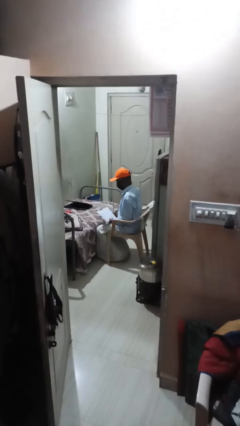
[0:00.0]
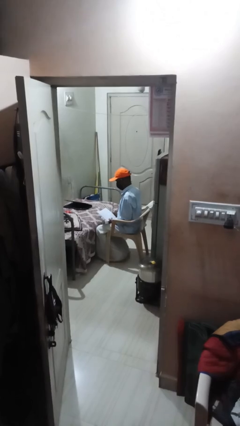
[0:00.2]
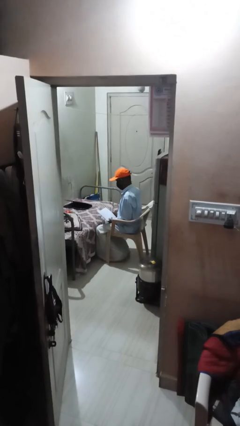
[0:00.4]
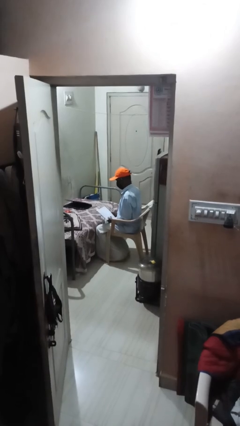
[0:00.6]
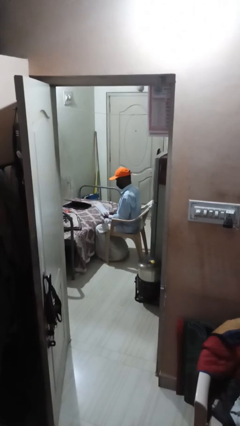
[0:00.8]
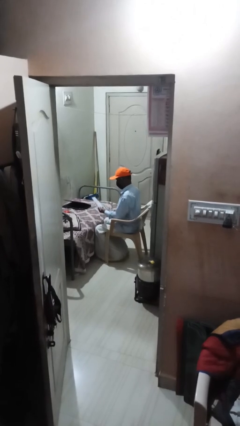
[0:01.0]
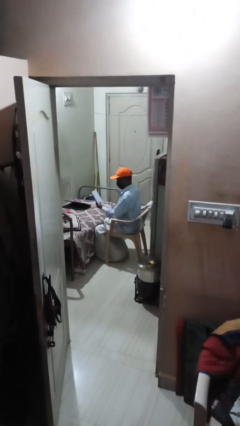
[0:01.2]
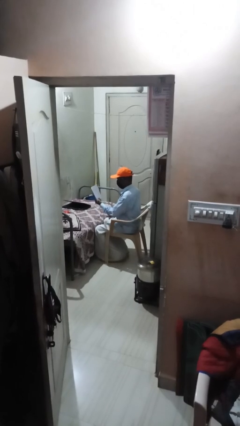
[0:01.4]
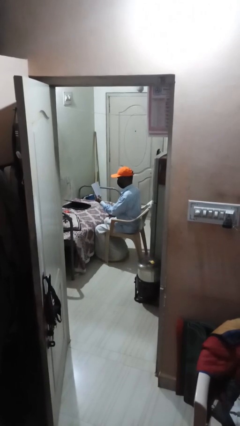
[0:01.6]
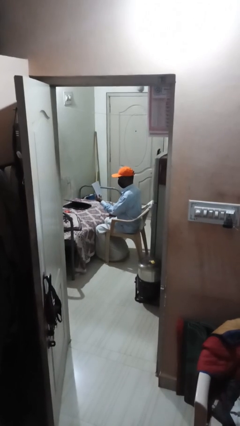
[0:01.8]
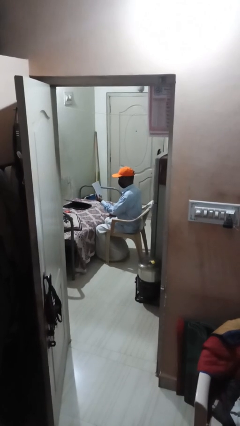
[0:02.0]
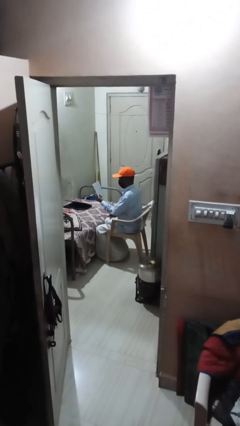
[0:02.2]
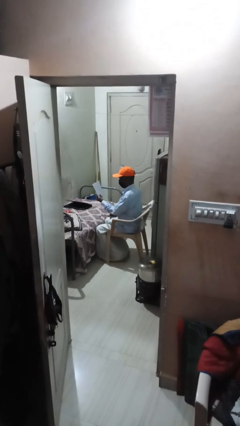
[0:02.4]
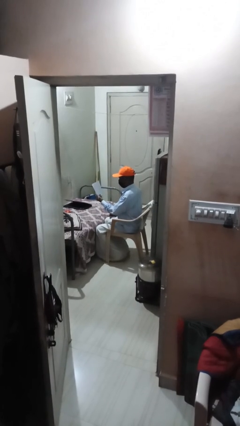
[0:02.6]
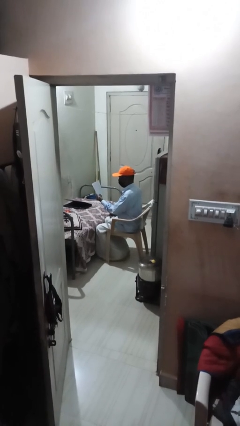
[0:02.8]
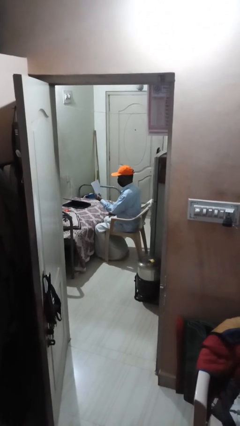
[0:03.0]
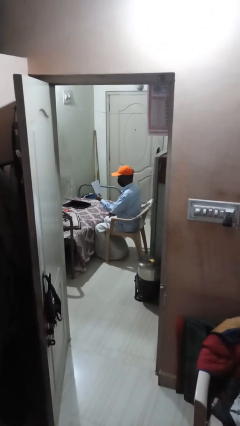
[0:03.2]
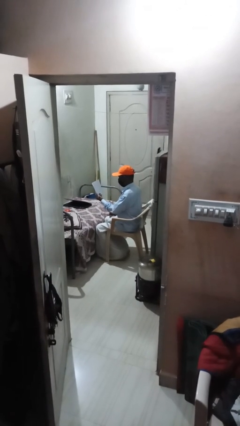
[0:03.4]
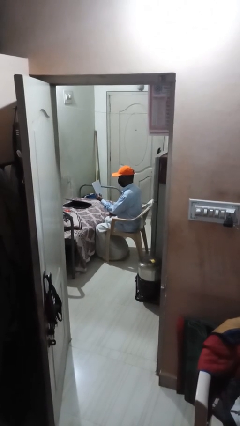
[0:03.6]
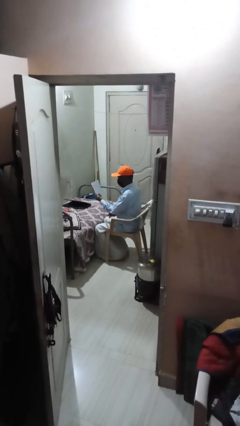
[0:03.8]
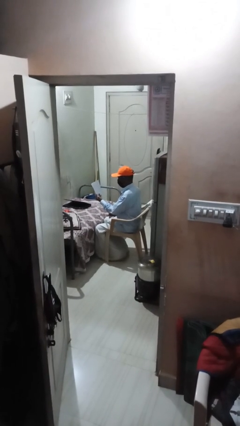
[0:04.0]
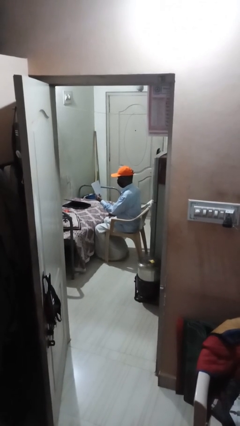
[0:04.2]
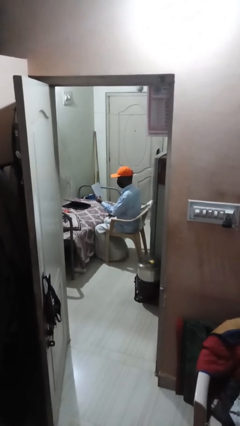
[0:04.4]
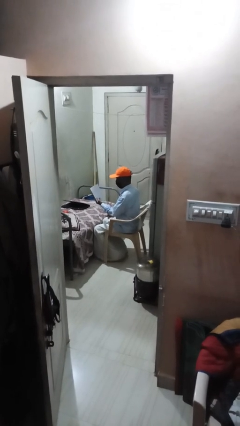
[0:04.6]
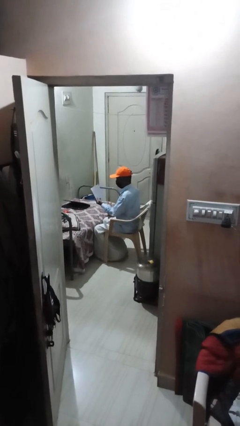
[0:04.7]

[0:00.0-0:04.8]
person reads document

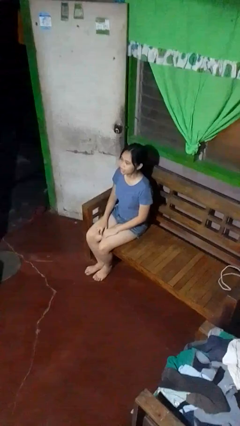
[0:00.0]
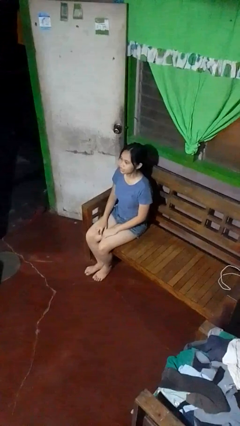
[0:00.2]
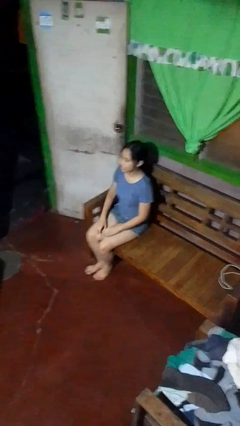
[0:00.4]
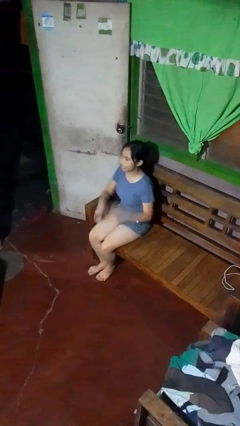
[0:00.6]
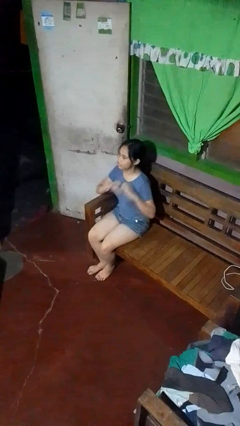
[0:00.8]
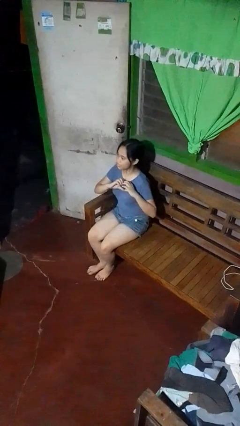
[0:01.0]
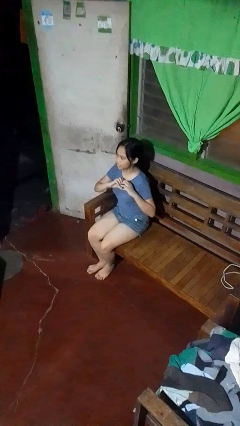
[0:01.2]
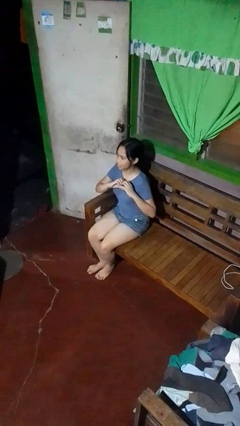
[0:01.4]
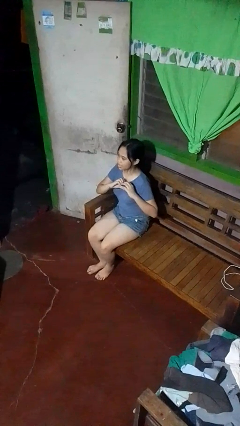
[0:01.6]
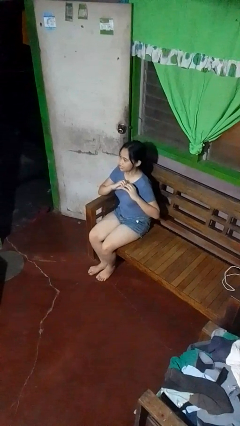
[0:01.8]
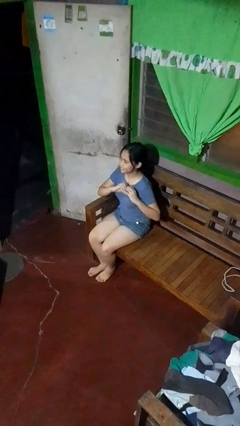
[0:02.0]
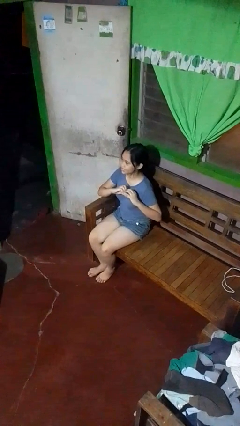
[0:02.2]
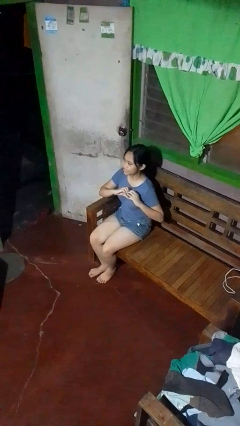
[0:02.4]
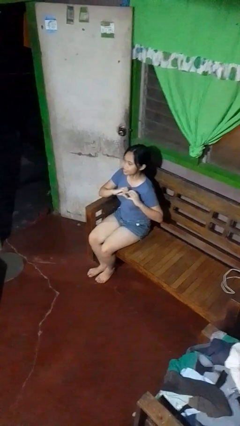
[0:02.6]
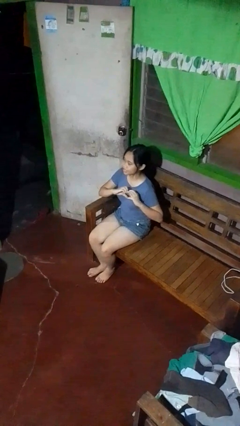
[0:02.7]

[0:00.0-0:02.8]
person gestures heart

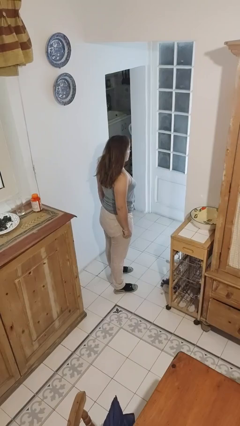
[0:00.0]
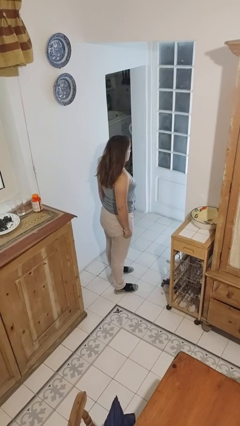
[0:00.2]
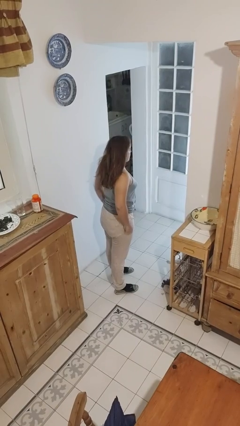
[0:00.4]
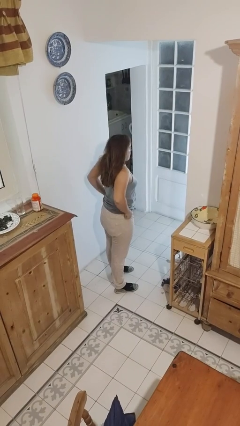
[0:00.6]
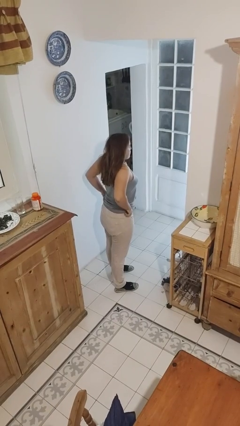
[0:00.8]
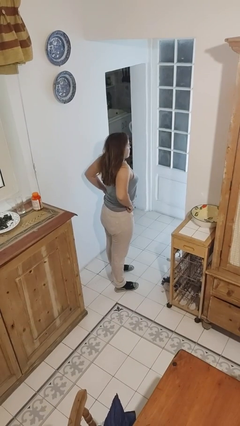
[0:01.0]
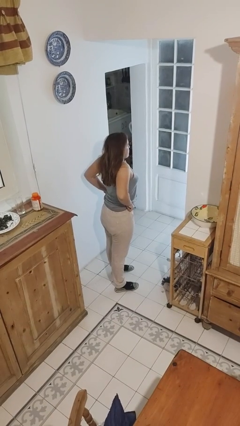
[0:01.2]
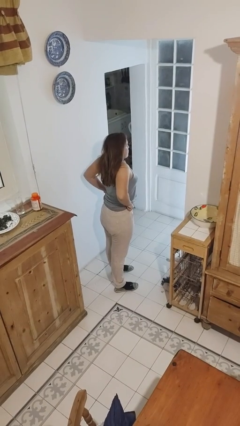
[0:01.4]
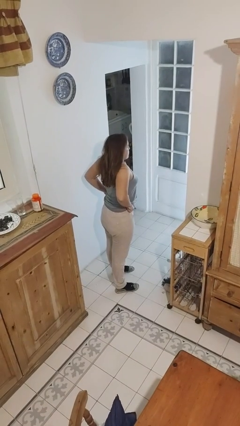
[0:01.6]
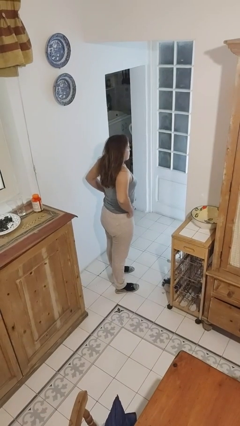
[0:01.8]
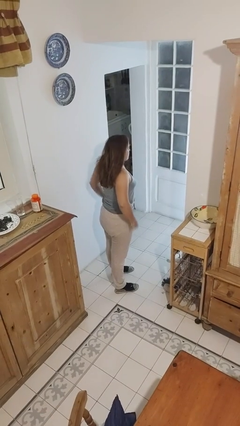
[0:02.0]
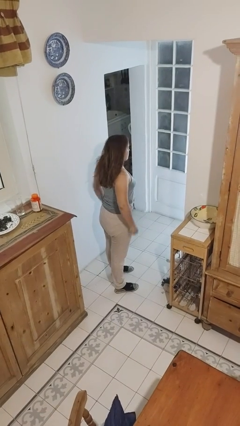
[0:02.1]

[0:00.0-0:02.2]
person hikes up pants

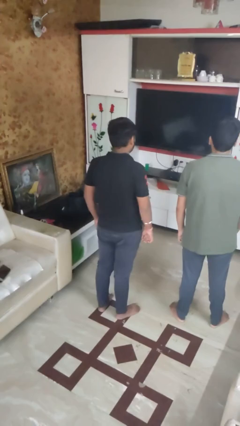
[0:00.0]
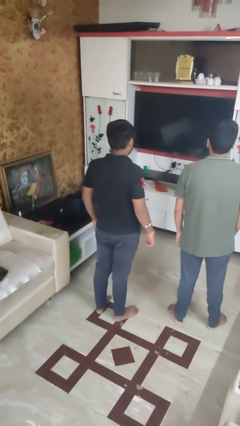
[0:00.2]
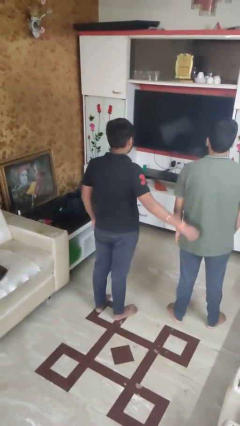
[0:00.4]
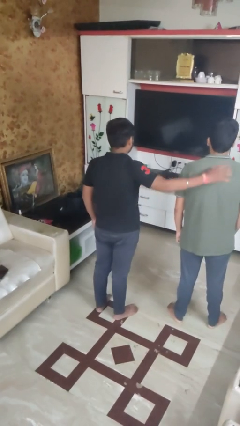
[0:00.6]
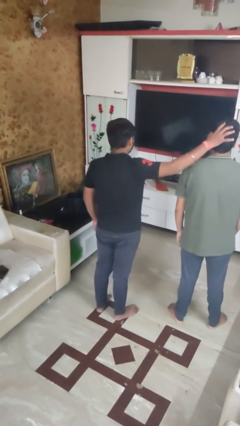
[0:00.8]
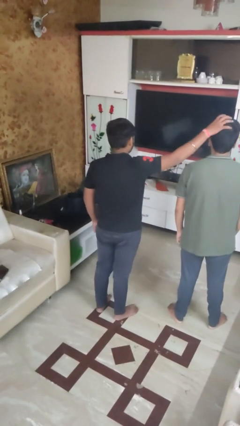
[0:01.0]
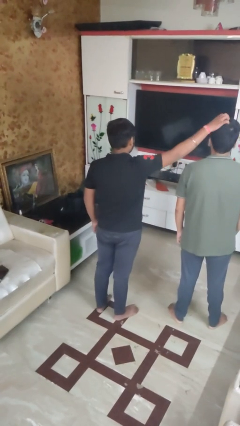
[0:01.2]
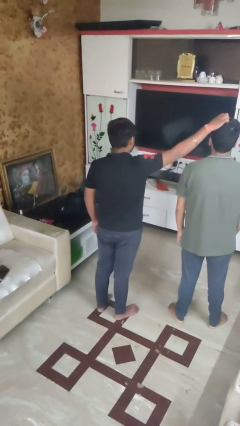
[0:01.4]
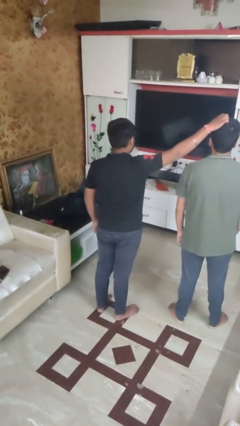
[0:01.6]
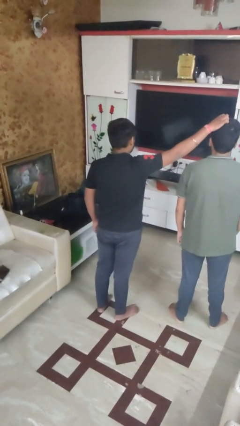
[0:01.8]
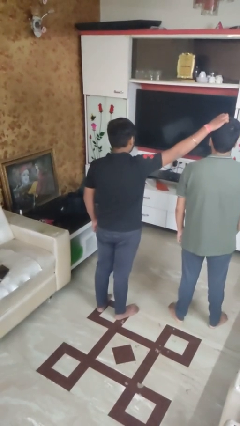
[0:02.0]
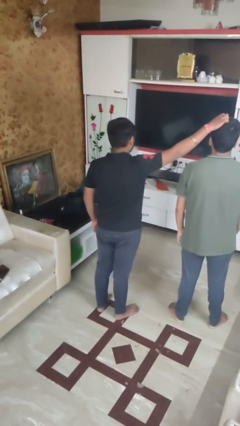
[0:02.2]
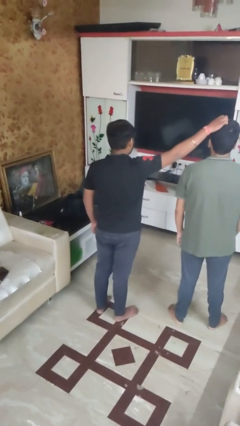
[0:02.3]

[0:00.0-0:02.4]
person grabs person by hair

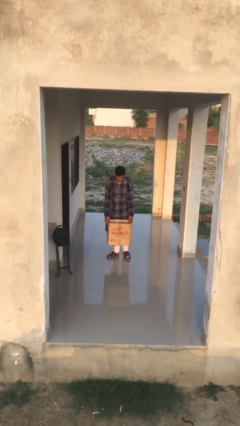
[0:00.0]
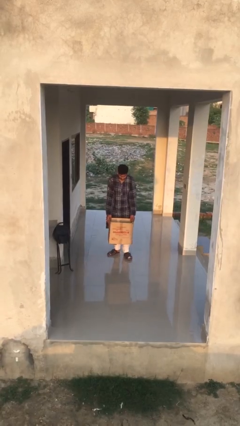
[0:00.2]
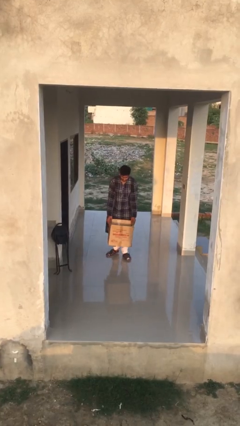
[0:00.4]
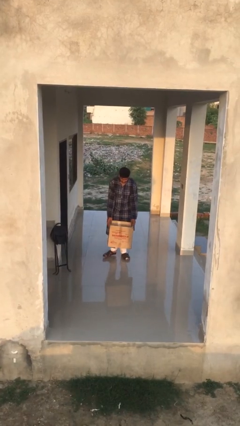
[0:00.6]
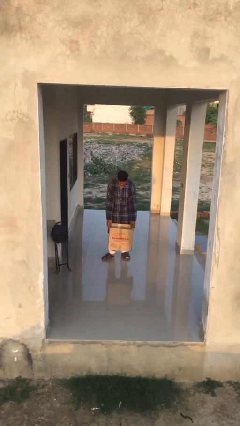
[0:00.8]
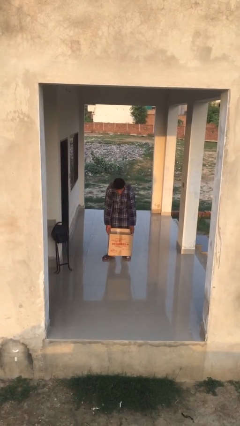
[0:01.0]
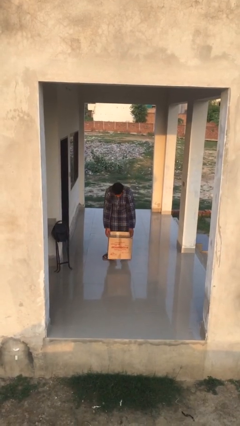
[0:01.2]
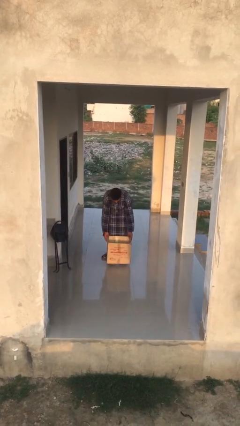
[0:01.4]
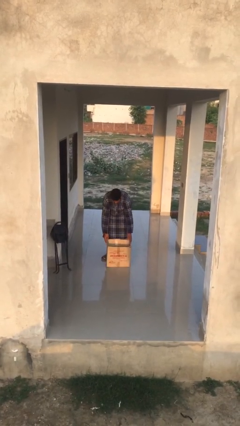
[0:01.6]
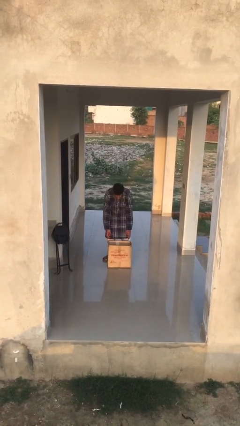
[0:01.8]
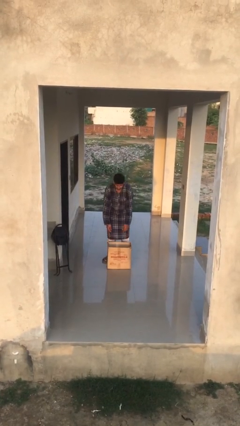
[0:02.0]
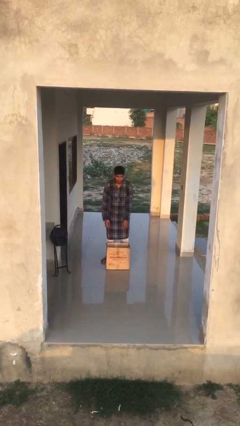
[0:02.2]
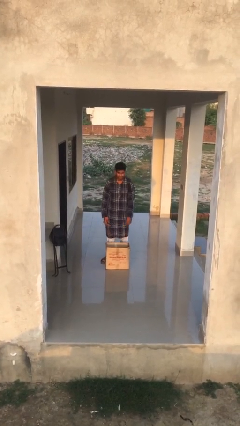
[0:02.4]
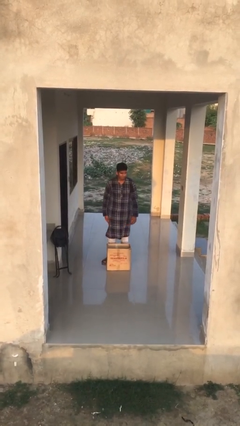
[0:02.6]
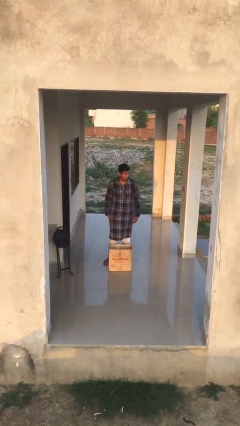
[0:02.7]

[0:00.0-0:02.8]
person puts down object on floor

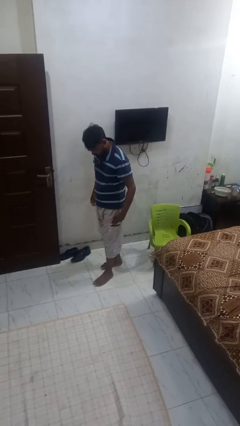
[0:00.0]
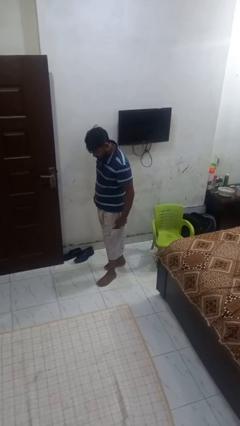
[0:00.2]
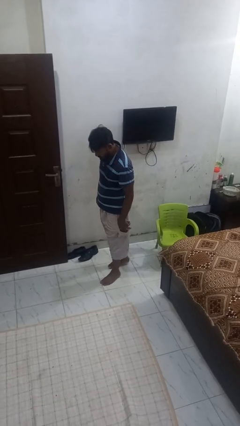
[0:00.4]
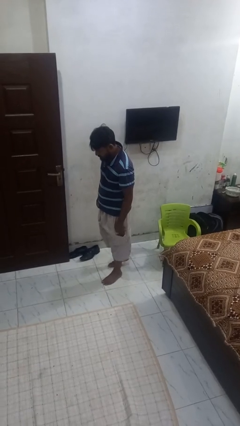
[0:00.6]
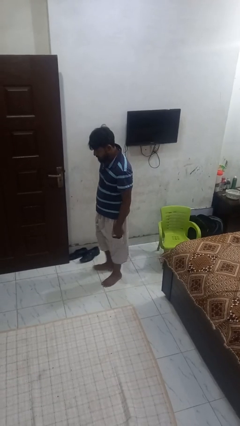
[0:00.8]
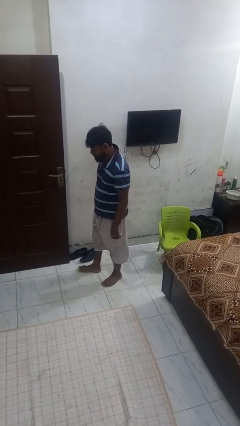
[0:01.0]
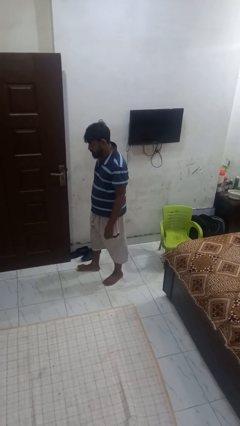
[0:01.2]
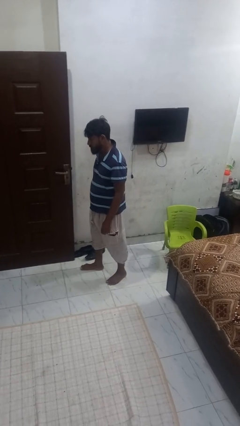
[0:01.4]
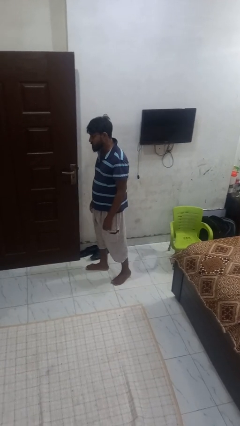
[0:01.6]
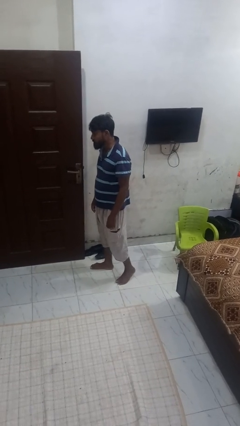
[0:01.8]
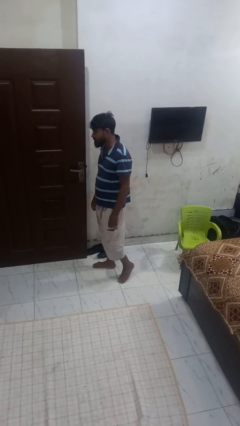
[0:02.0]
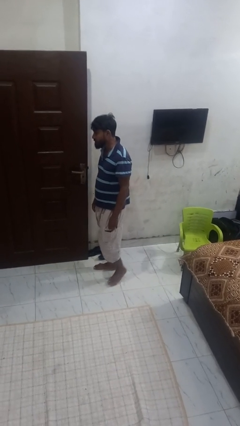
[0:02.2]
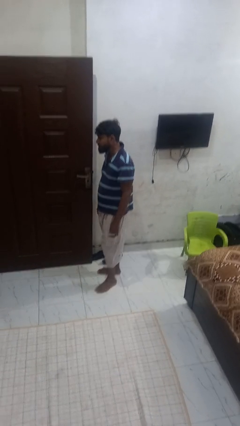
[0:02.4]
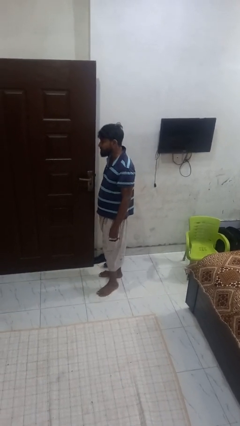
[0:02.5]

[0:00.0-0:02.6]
person puts phone into pocket
